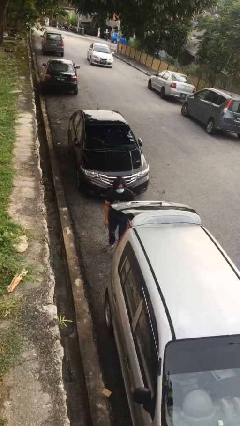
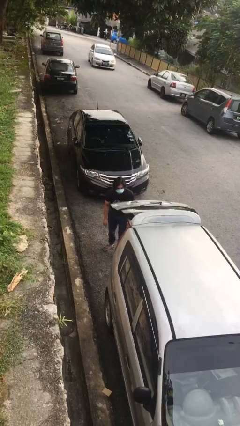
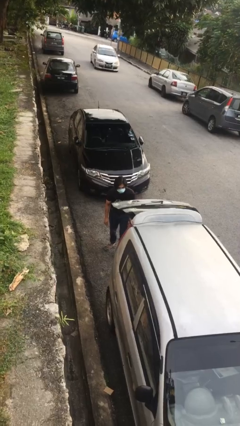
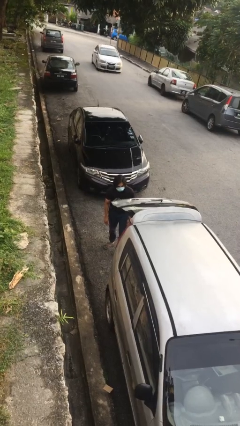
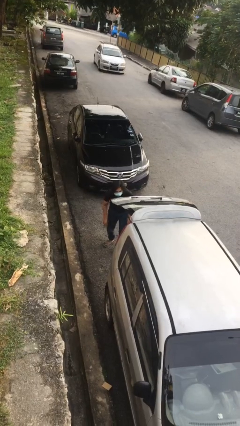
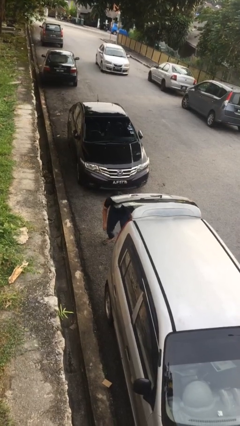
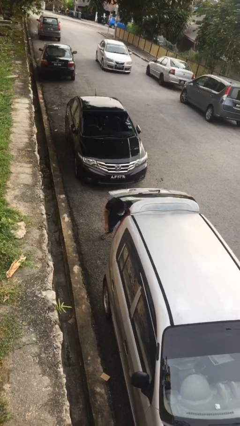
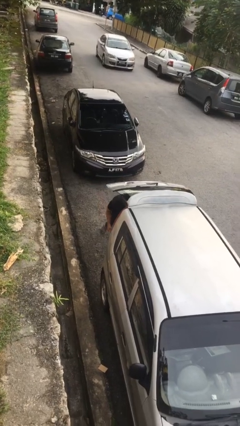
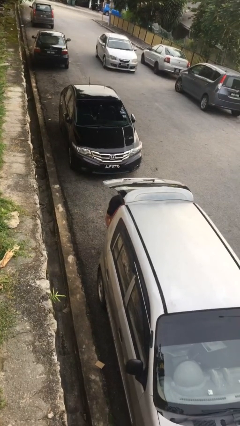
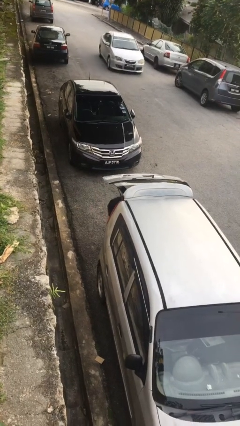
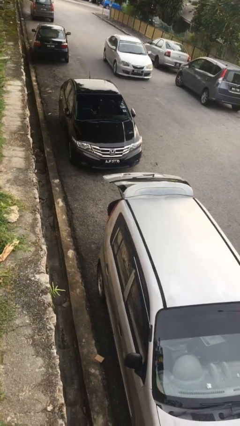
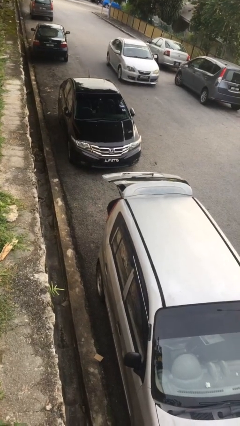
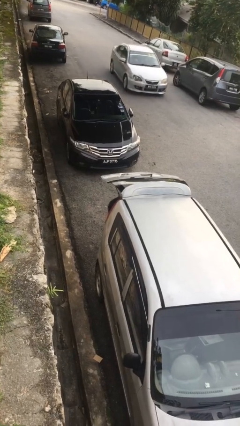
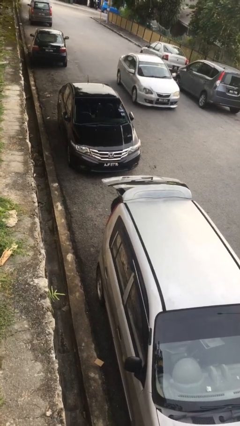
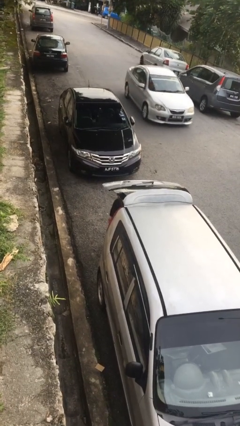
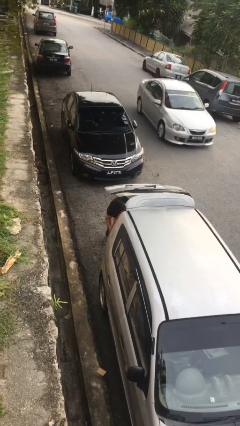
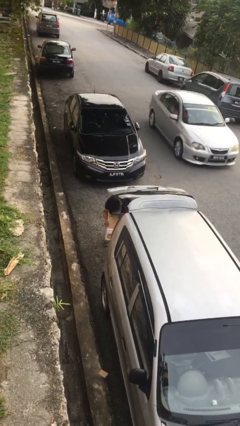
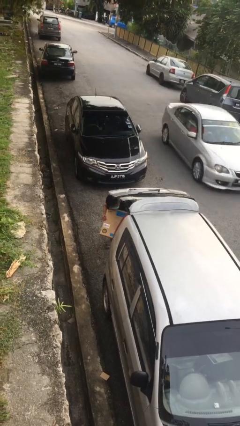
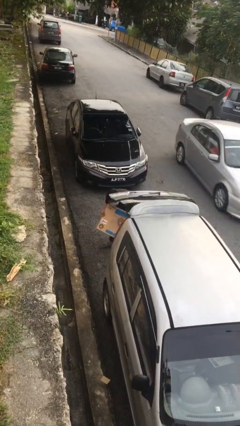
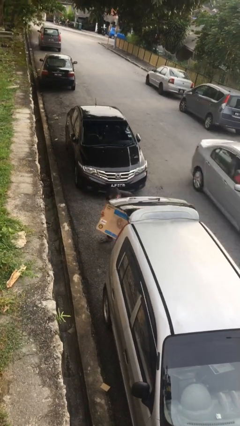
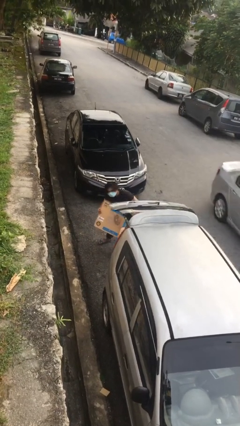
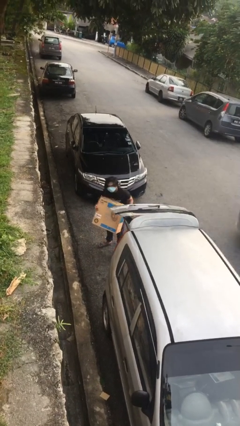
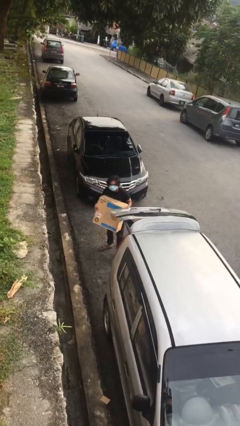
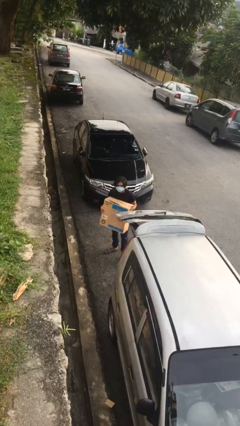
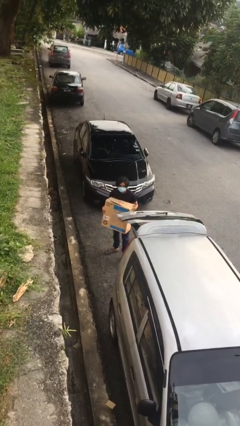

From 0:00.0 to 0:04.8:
person unloads car

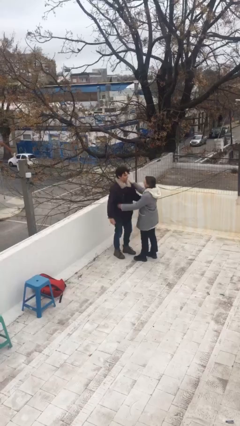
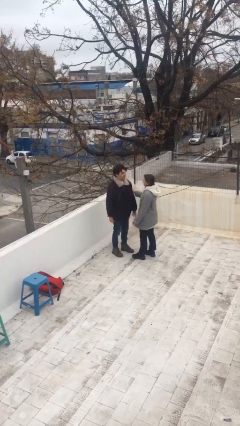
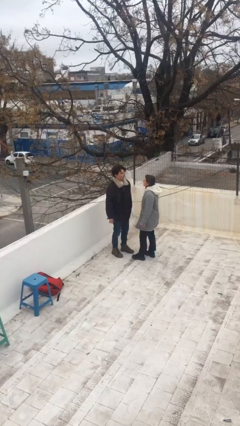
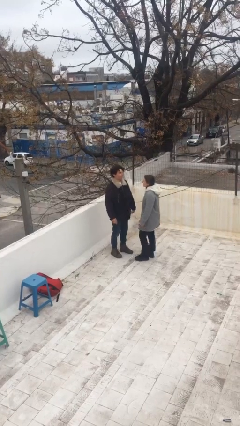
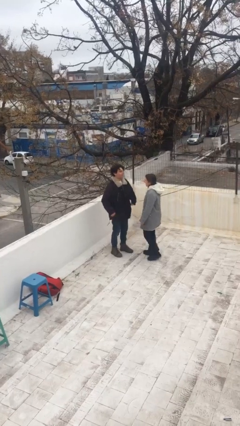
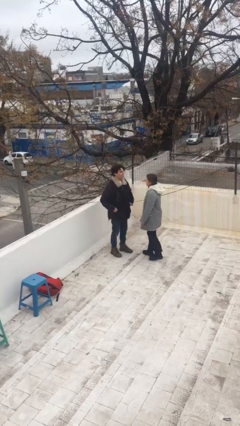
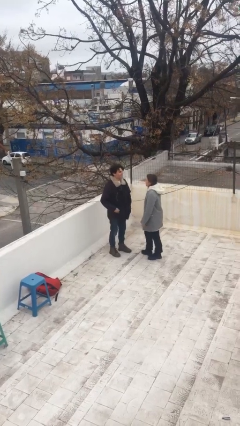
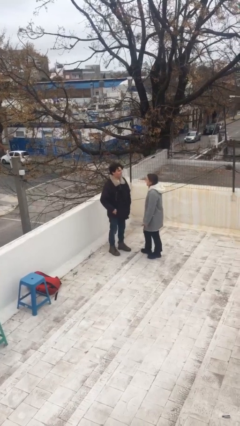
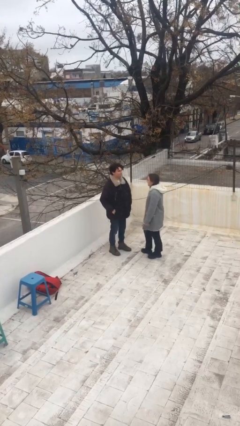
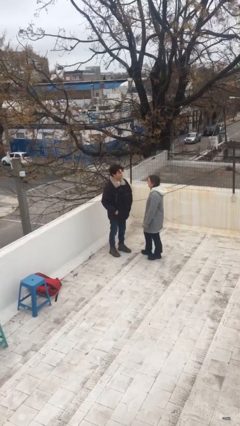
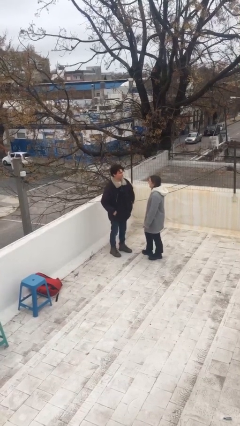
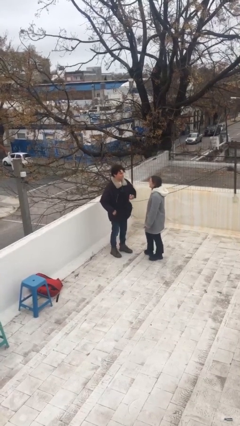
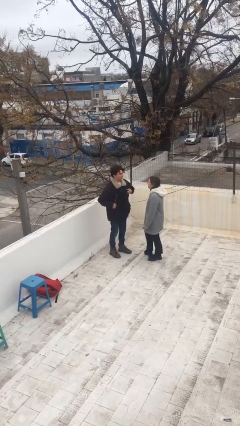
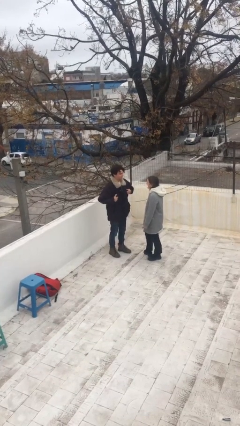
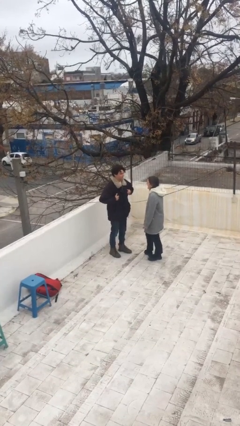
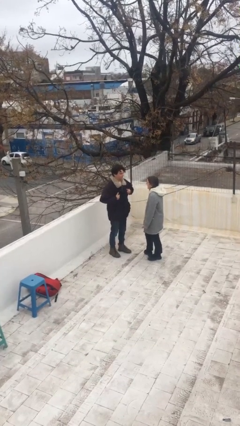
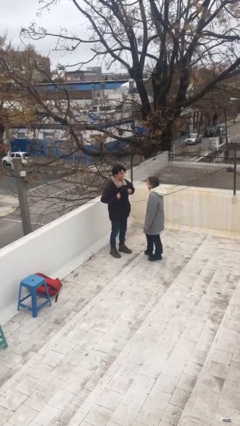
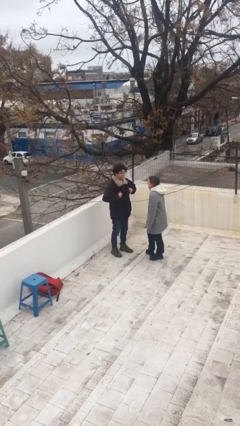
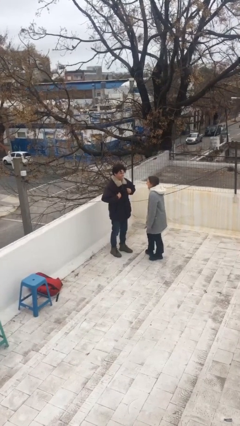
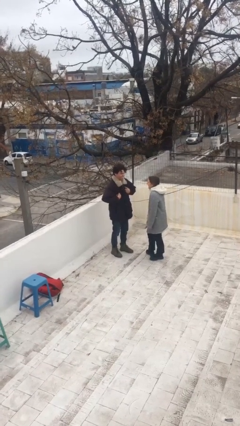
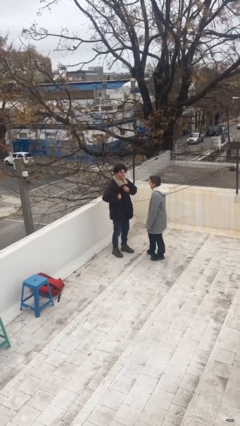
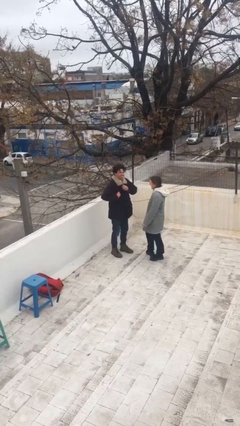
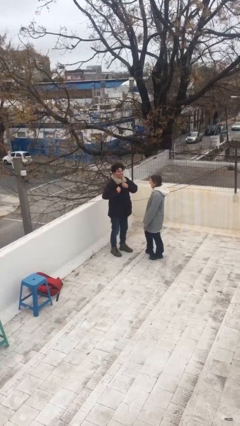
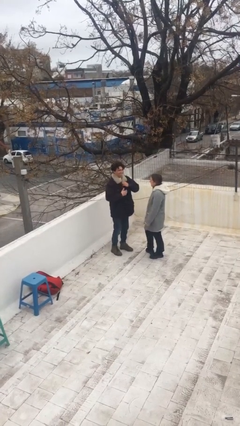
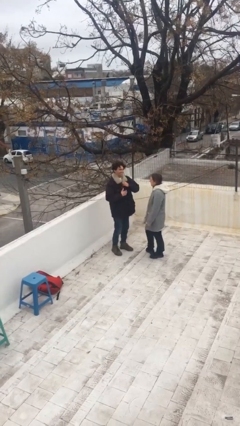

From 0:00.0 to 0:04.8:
person talks to person

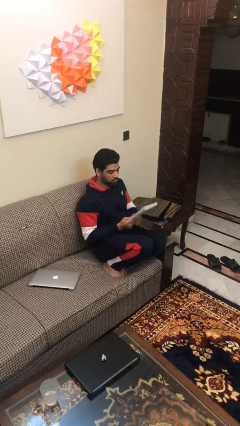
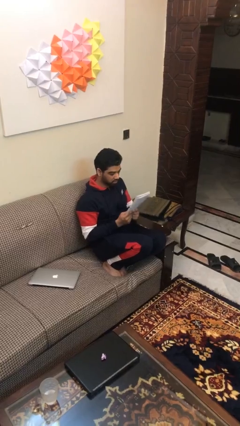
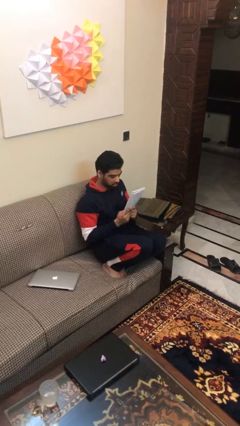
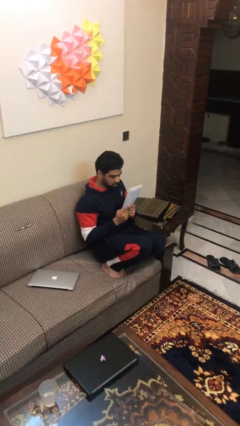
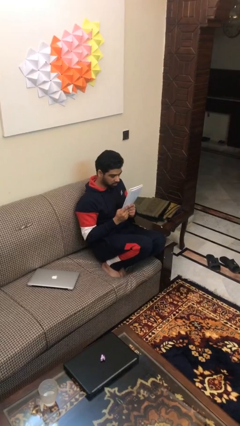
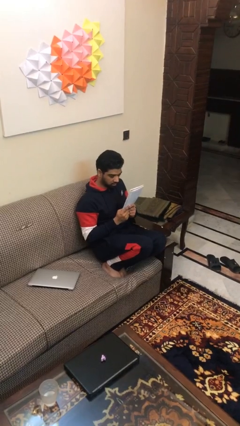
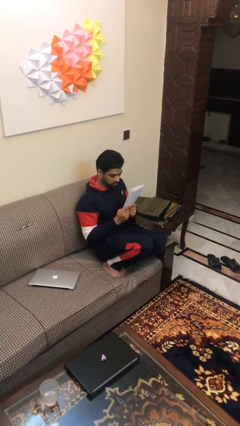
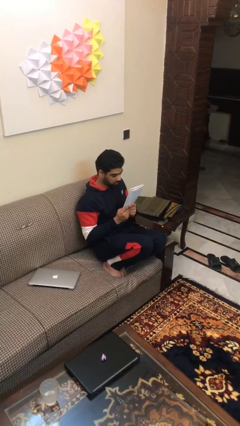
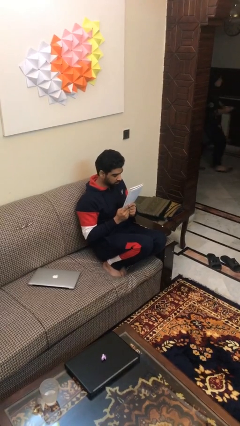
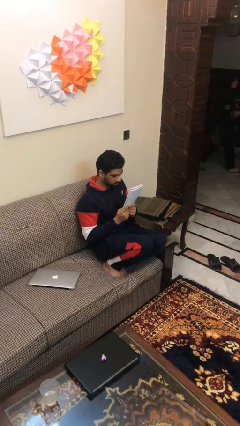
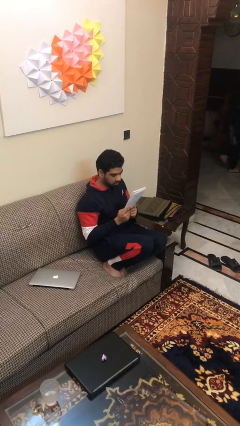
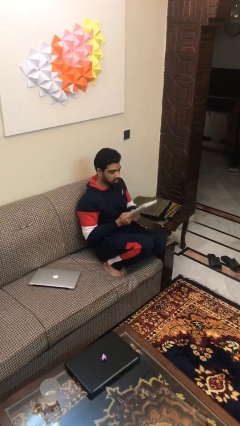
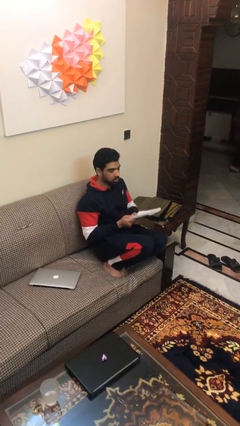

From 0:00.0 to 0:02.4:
person reads document

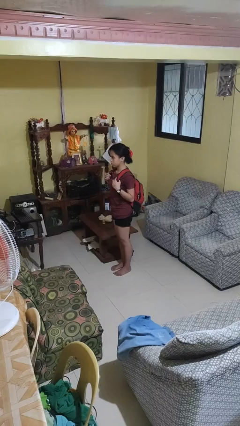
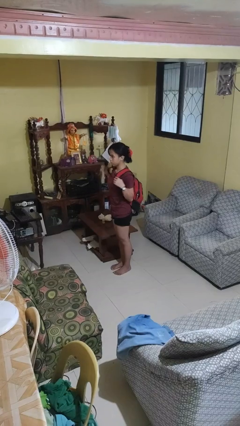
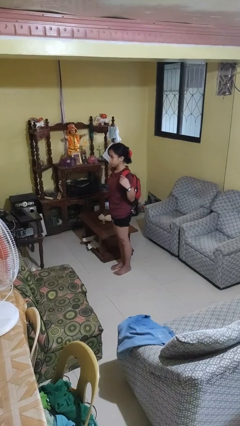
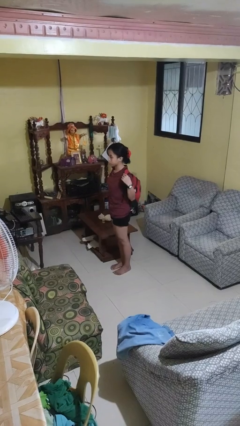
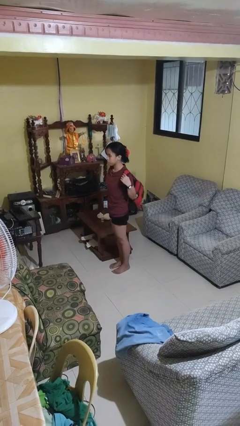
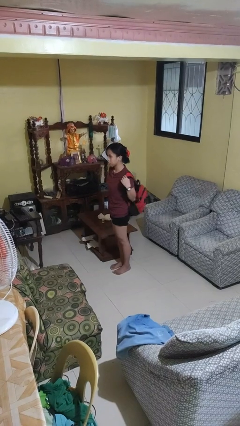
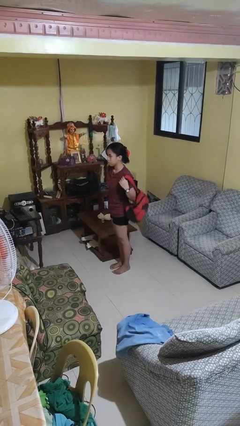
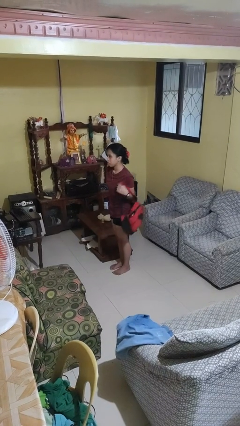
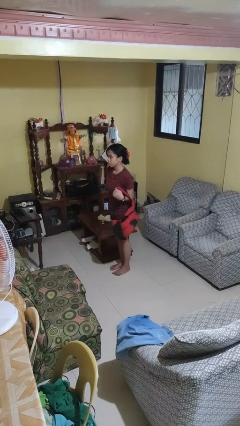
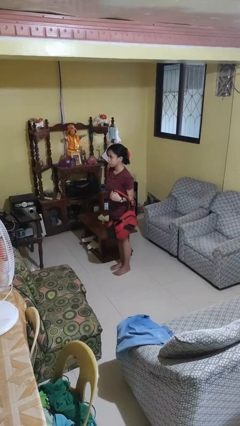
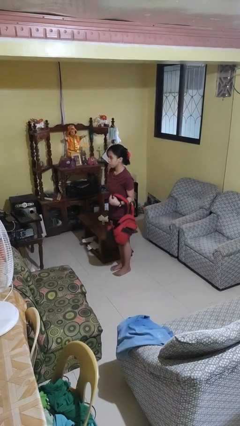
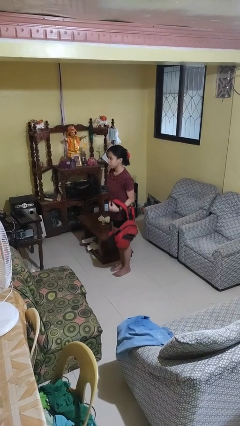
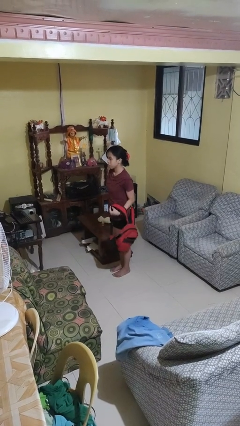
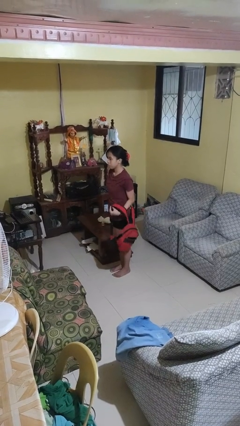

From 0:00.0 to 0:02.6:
person takes off backpack

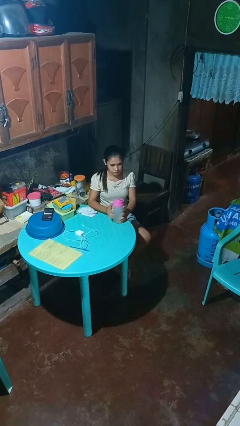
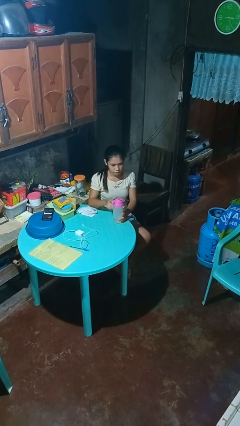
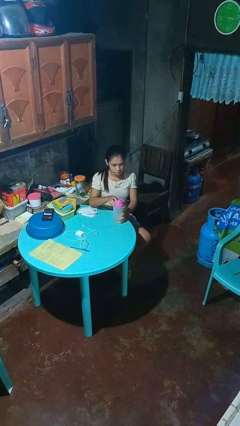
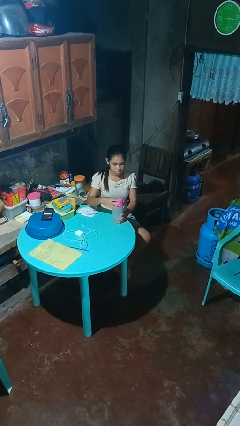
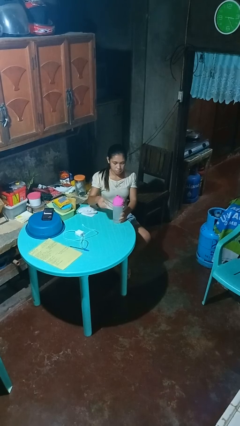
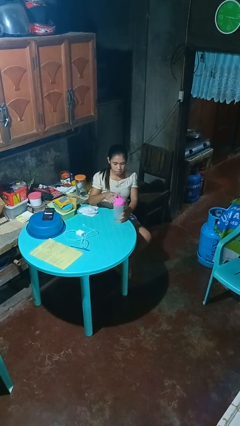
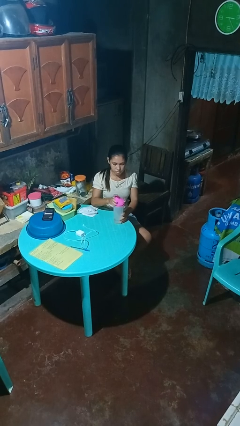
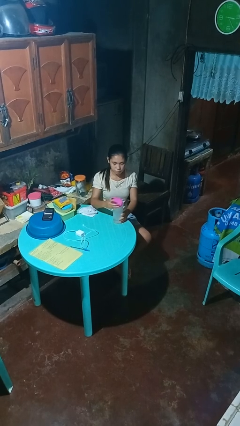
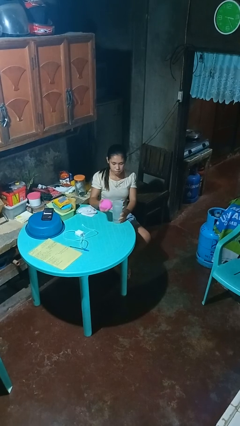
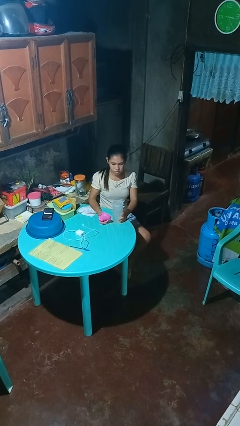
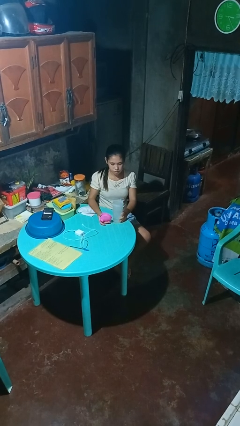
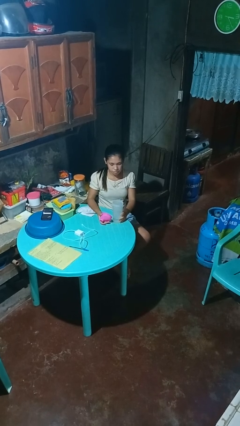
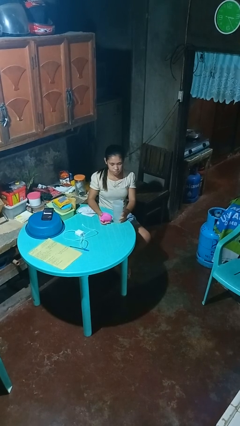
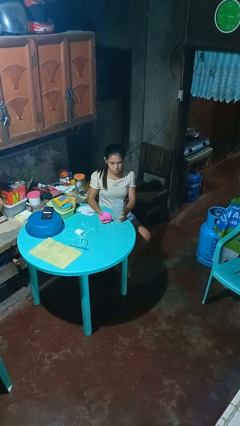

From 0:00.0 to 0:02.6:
person unscrews lid from bottle
